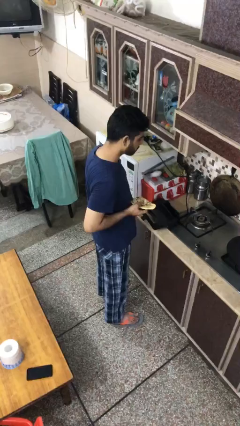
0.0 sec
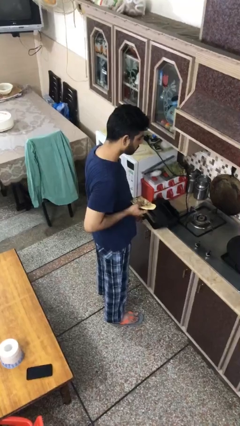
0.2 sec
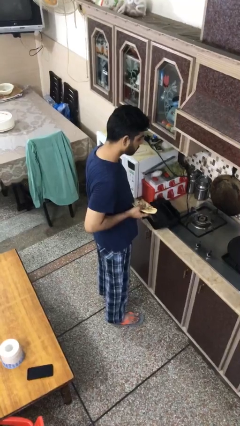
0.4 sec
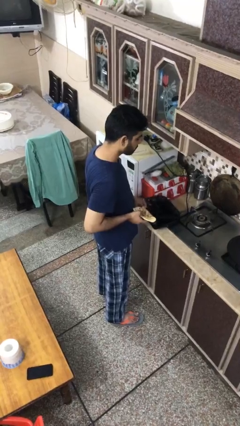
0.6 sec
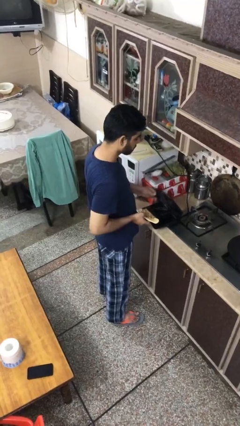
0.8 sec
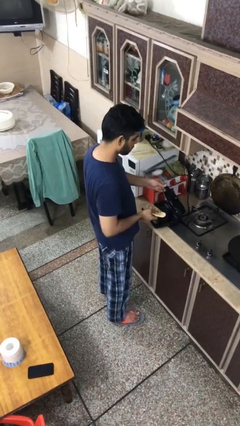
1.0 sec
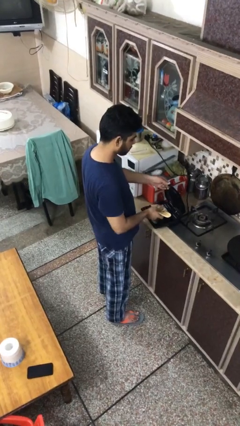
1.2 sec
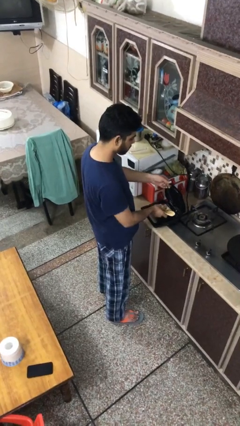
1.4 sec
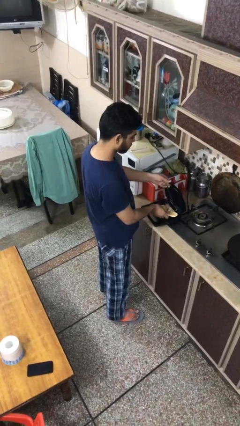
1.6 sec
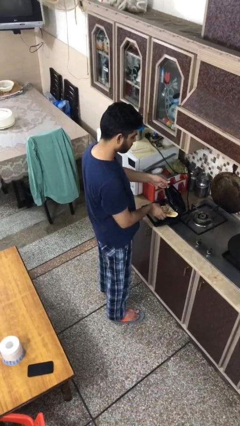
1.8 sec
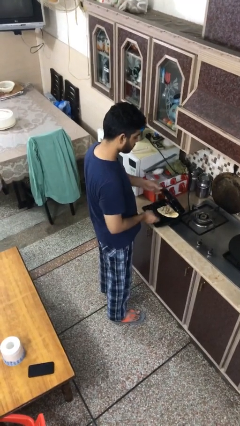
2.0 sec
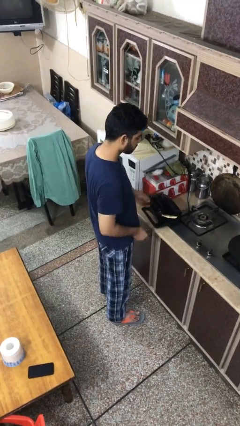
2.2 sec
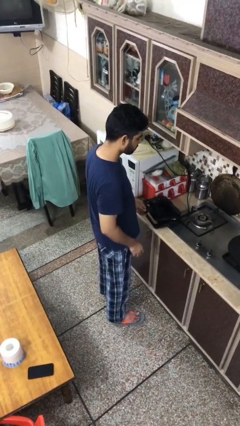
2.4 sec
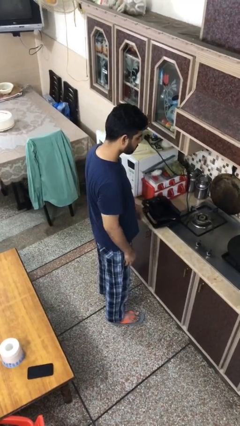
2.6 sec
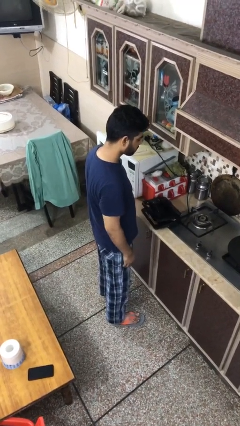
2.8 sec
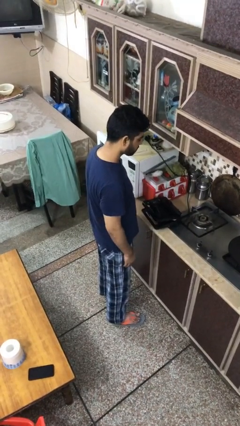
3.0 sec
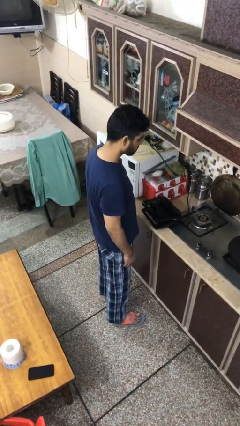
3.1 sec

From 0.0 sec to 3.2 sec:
person puts object into toaster

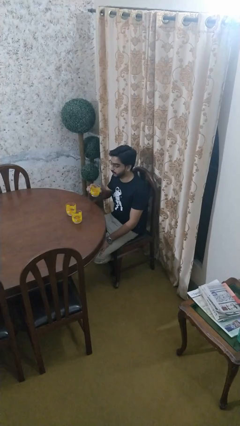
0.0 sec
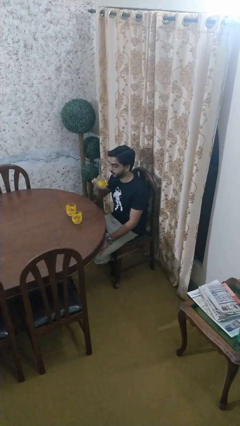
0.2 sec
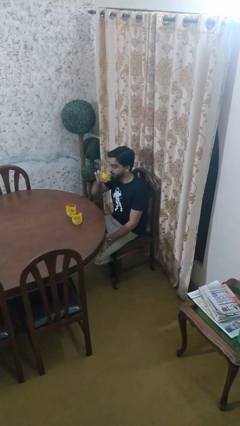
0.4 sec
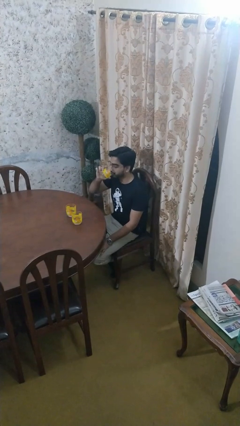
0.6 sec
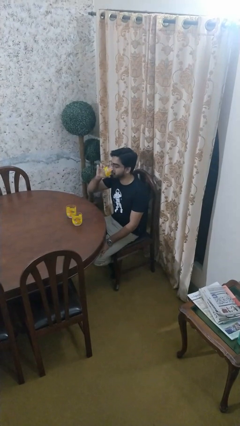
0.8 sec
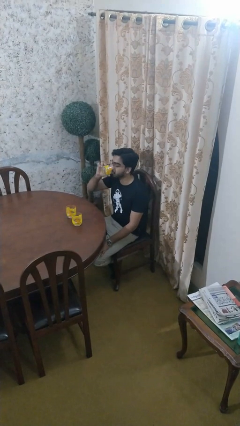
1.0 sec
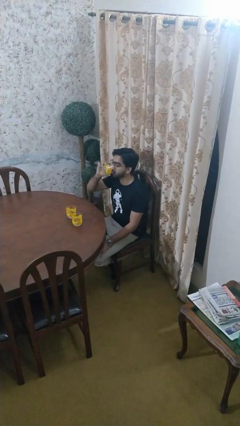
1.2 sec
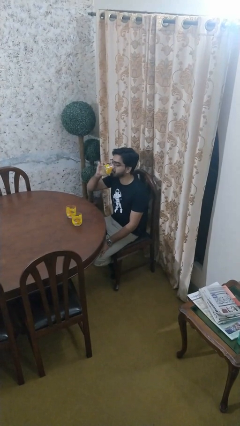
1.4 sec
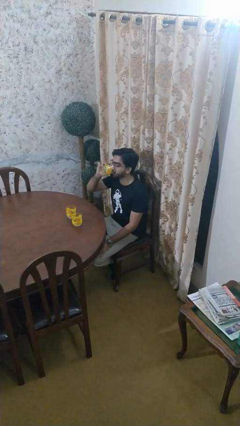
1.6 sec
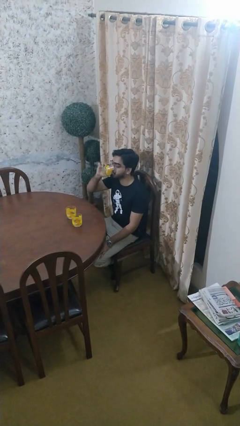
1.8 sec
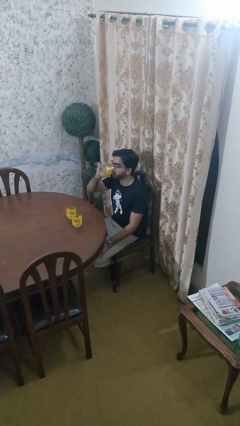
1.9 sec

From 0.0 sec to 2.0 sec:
person drinks from shotglass

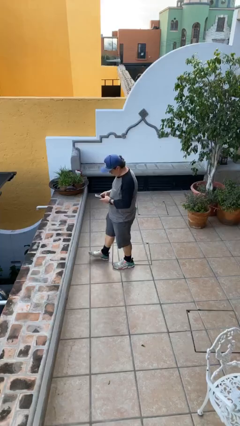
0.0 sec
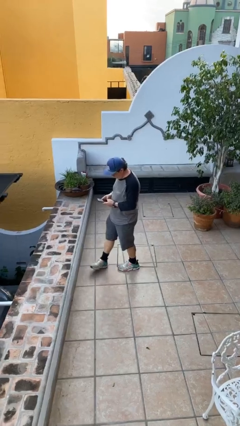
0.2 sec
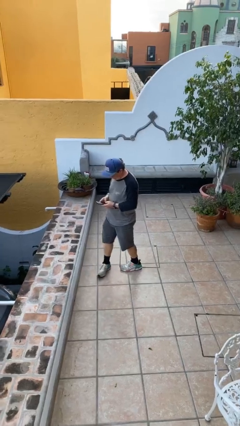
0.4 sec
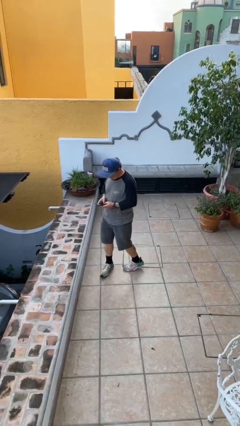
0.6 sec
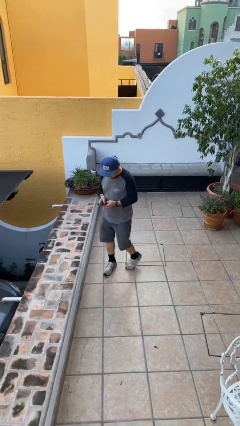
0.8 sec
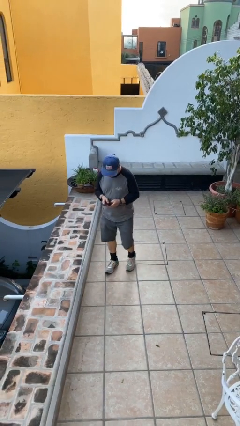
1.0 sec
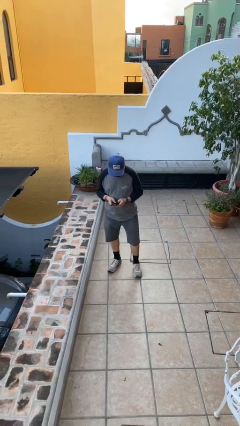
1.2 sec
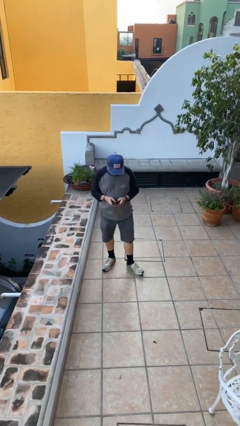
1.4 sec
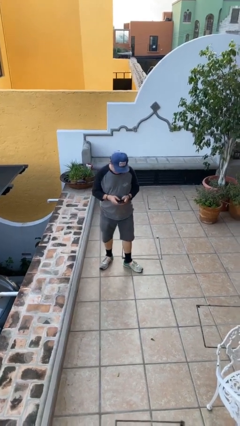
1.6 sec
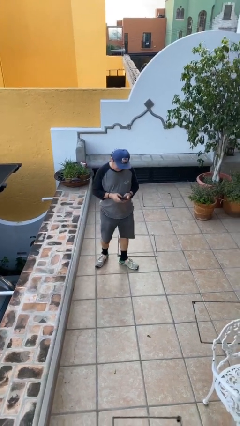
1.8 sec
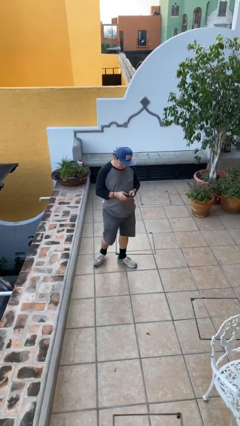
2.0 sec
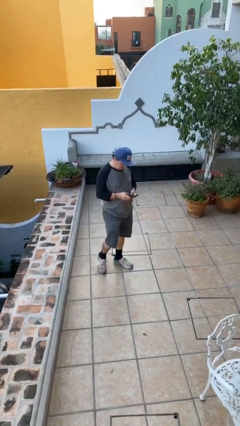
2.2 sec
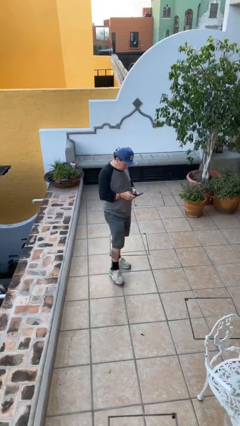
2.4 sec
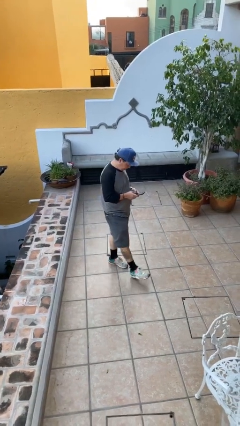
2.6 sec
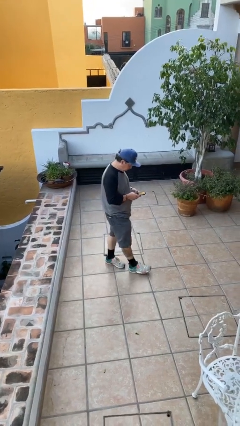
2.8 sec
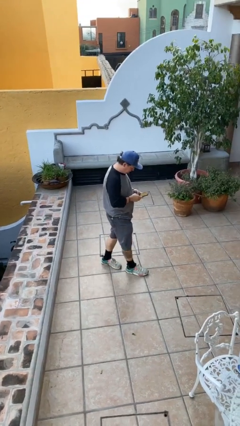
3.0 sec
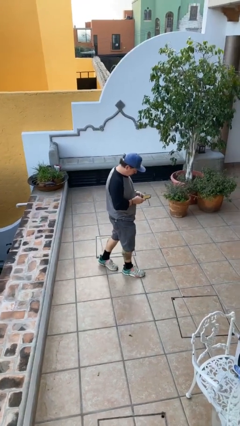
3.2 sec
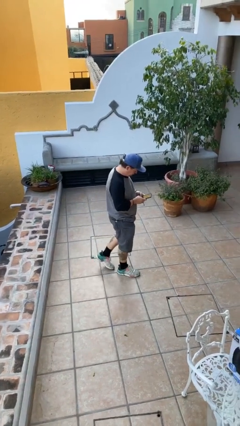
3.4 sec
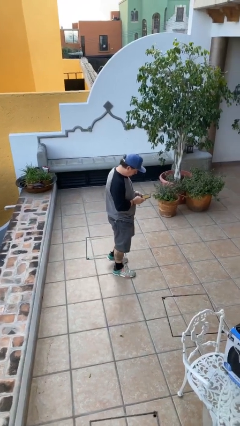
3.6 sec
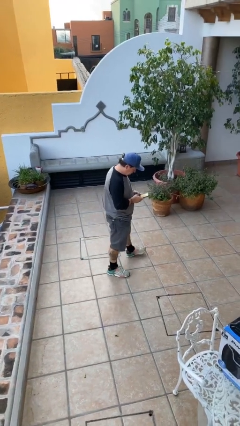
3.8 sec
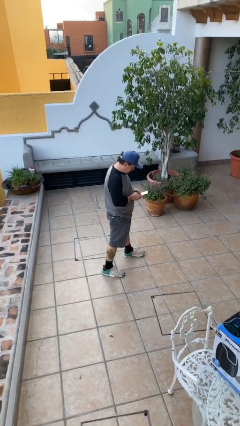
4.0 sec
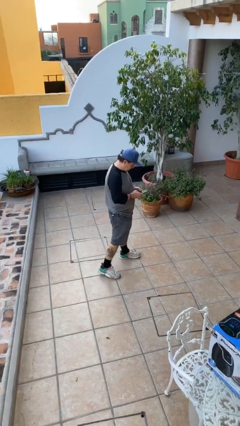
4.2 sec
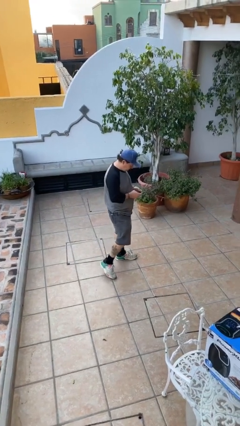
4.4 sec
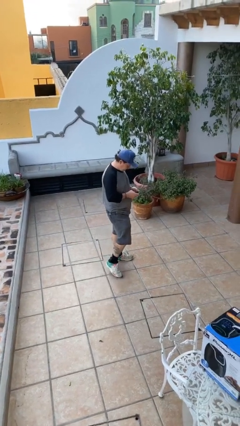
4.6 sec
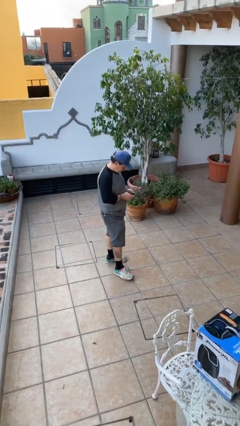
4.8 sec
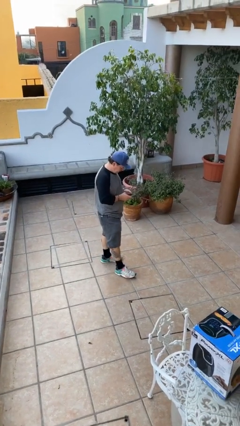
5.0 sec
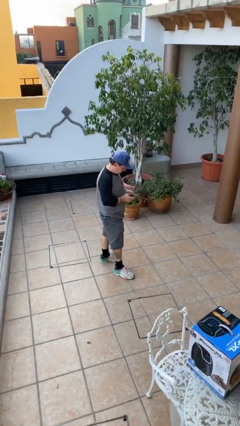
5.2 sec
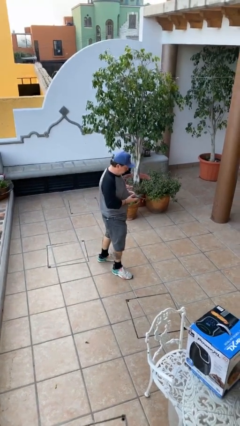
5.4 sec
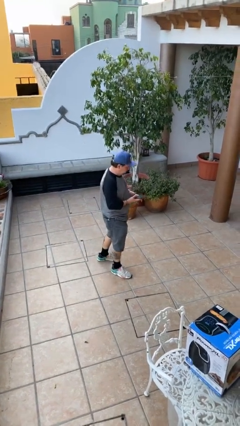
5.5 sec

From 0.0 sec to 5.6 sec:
person texts on phone

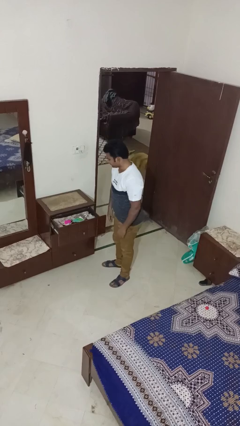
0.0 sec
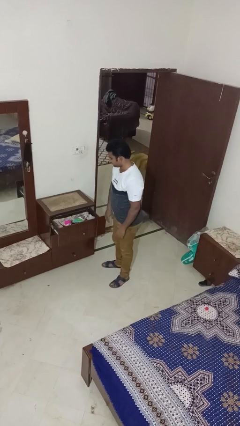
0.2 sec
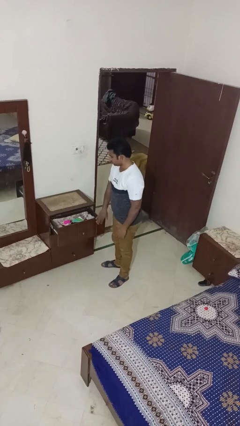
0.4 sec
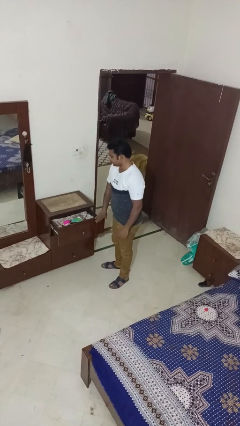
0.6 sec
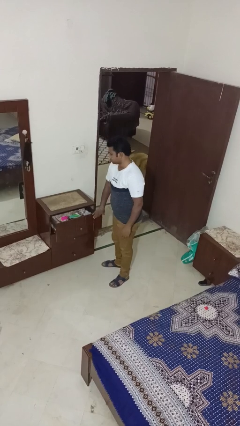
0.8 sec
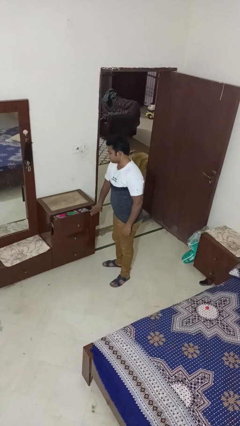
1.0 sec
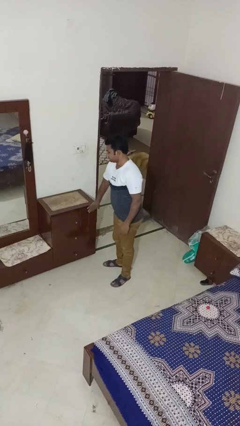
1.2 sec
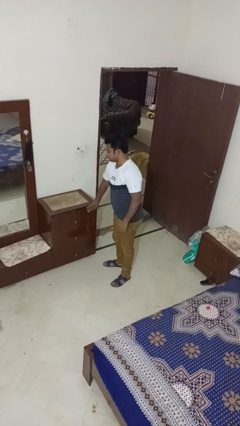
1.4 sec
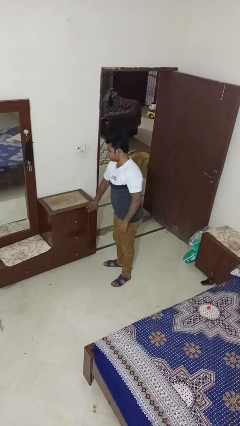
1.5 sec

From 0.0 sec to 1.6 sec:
person closes dresser drawer

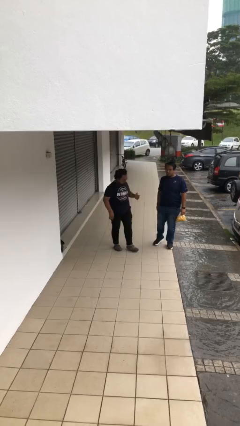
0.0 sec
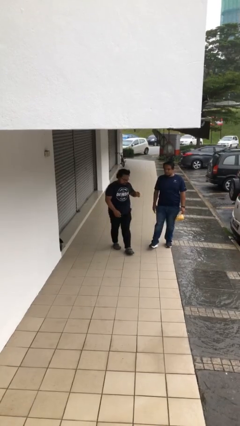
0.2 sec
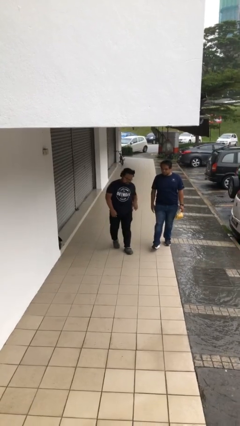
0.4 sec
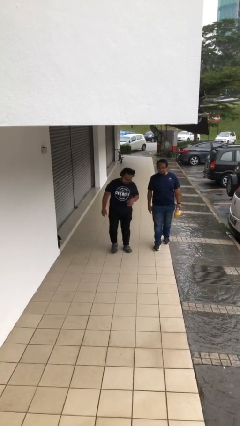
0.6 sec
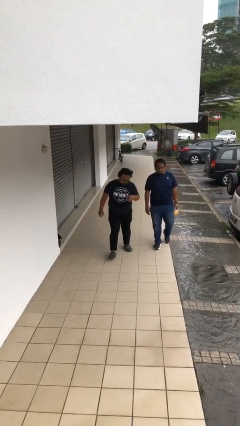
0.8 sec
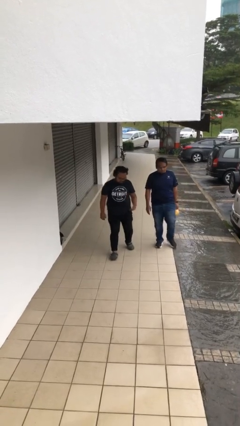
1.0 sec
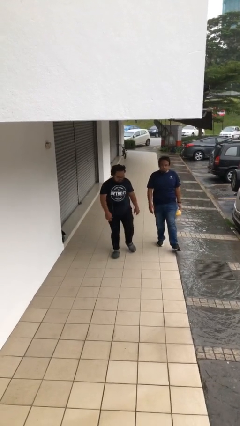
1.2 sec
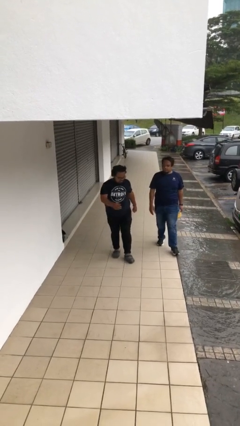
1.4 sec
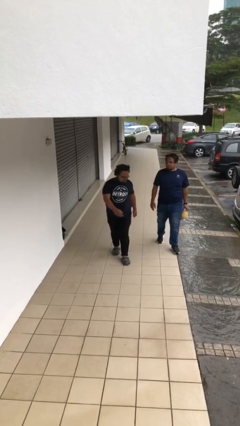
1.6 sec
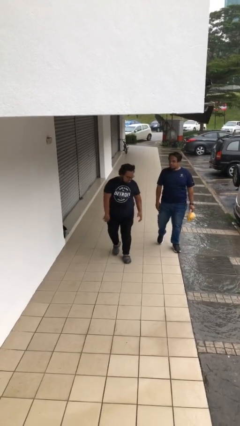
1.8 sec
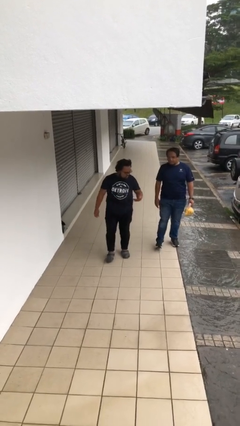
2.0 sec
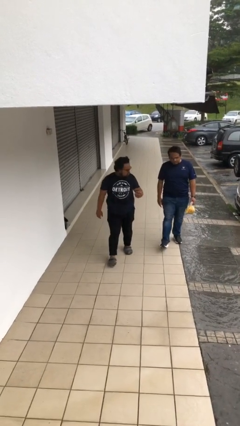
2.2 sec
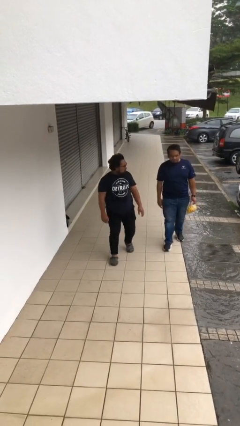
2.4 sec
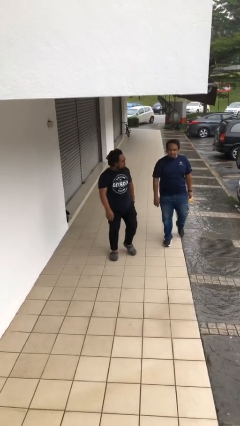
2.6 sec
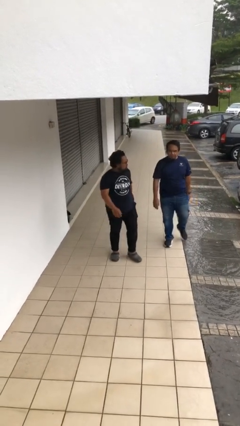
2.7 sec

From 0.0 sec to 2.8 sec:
person talks to person

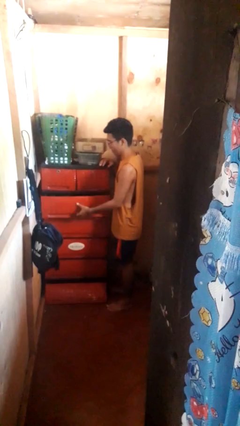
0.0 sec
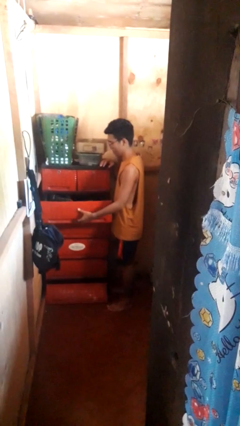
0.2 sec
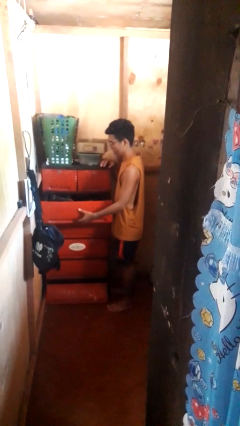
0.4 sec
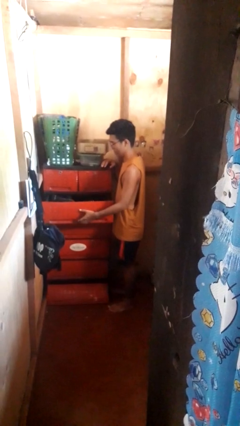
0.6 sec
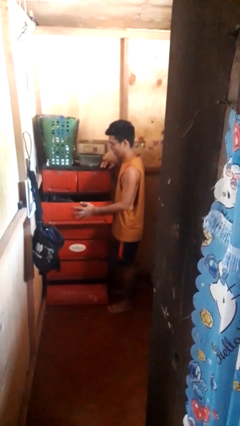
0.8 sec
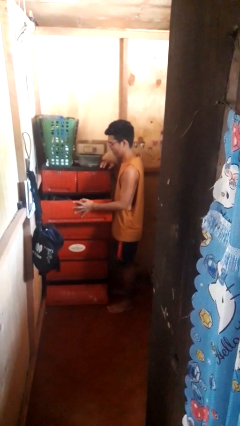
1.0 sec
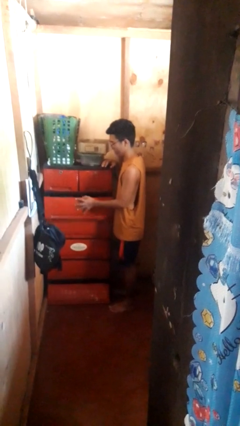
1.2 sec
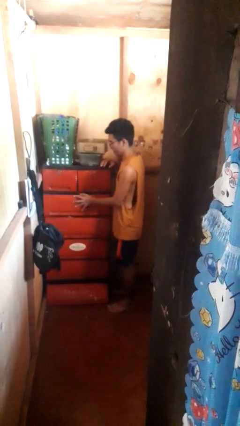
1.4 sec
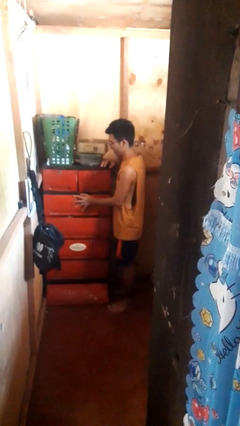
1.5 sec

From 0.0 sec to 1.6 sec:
person opens dresser drawer

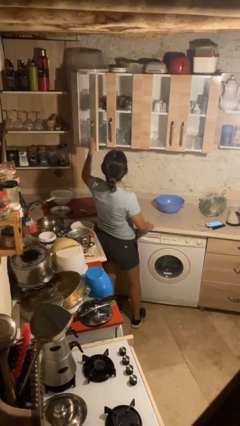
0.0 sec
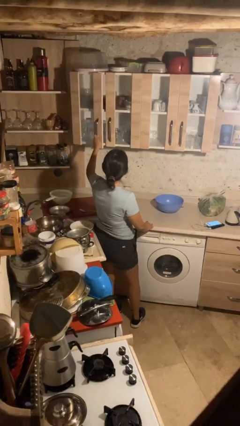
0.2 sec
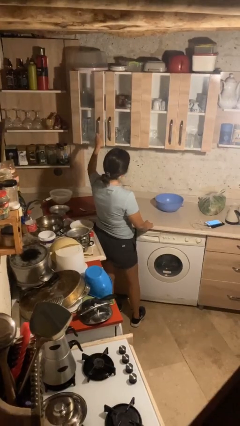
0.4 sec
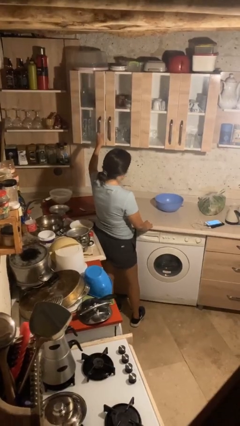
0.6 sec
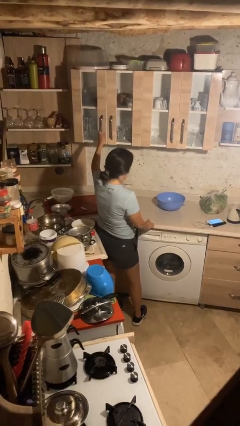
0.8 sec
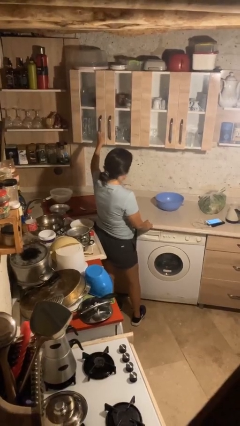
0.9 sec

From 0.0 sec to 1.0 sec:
person closes cabinet
